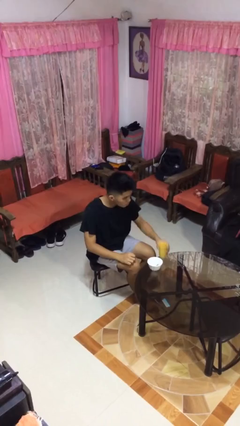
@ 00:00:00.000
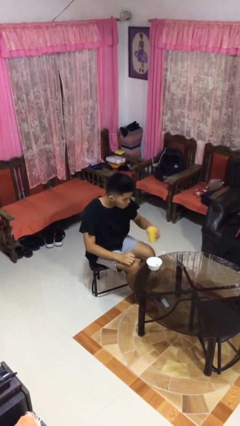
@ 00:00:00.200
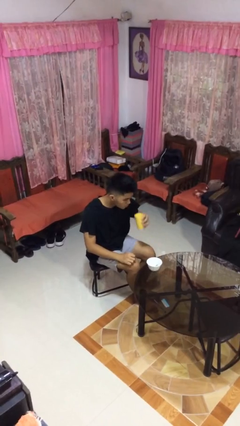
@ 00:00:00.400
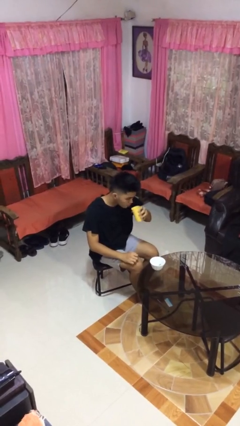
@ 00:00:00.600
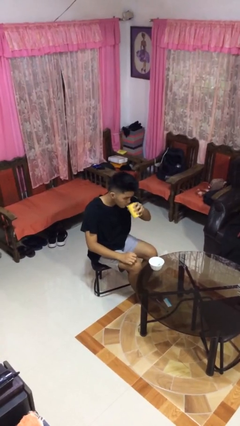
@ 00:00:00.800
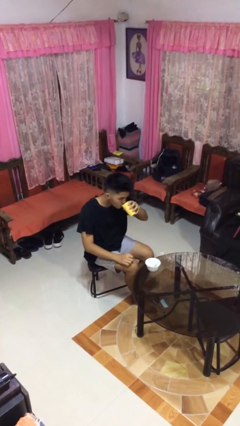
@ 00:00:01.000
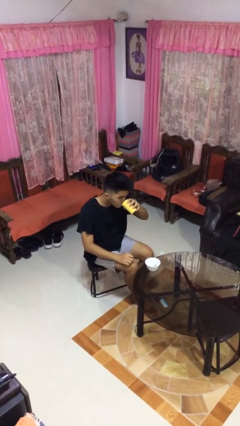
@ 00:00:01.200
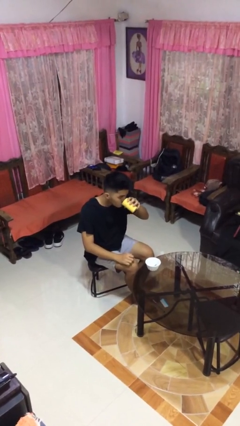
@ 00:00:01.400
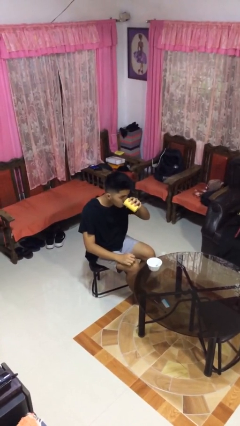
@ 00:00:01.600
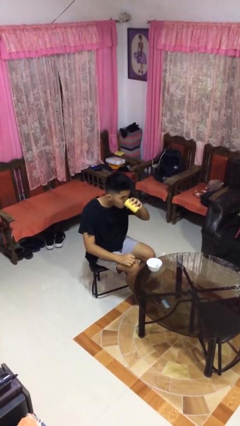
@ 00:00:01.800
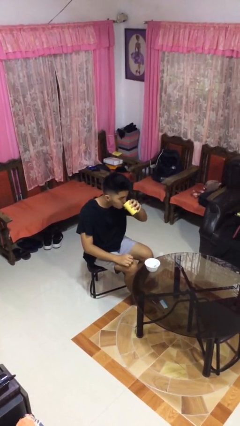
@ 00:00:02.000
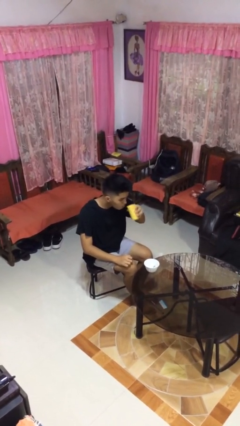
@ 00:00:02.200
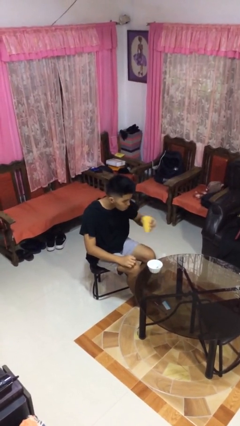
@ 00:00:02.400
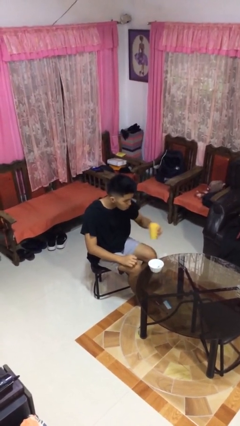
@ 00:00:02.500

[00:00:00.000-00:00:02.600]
person drinks from cup

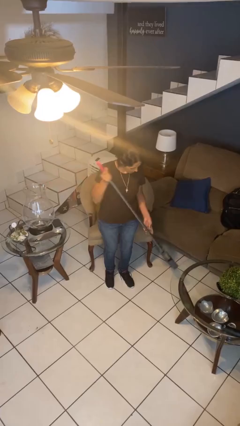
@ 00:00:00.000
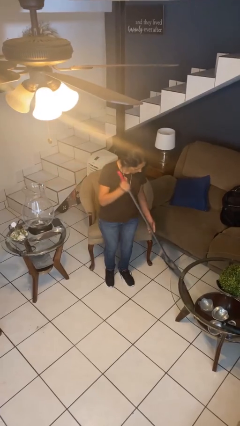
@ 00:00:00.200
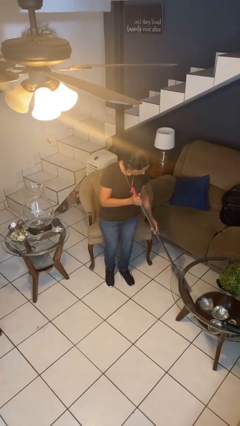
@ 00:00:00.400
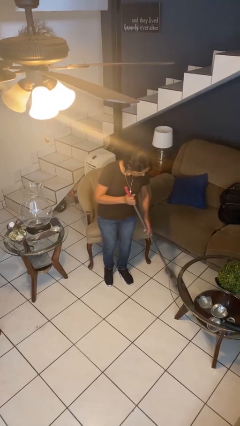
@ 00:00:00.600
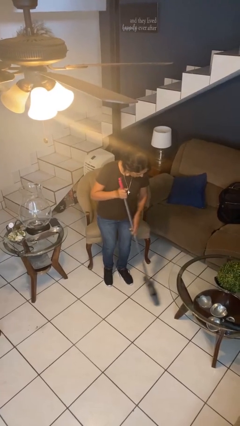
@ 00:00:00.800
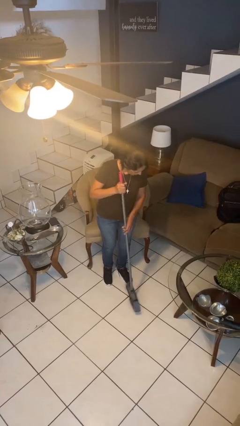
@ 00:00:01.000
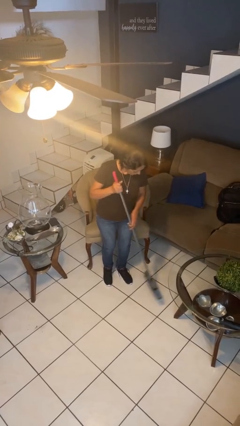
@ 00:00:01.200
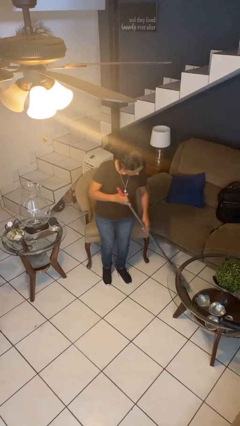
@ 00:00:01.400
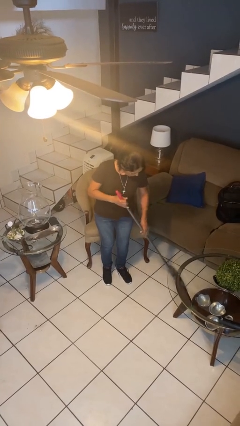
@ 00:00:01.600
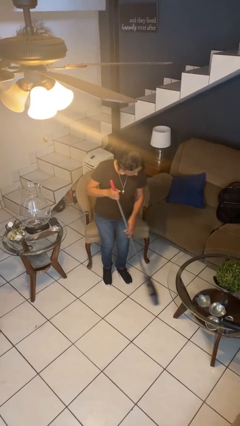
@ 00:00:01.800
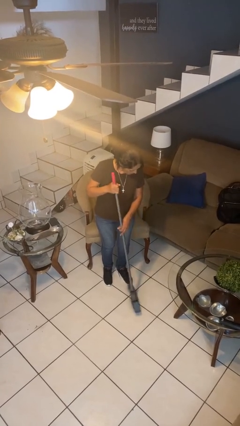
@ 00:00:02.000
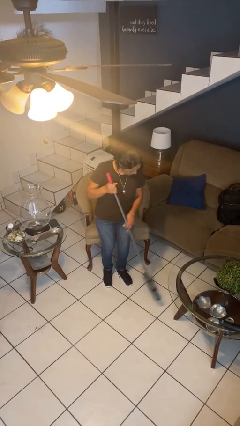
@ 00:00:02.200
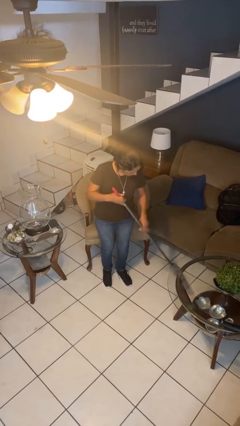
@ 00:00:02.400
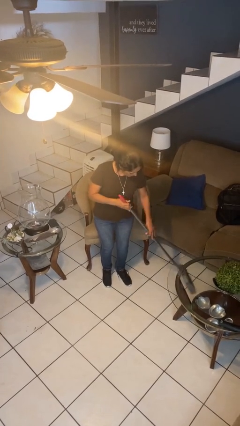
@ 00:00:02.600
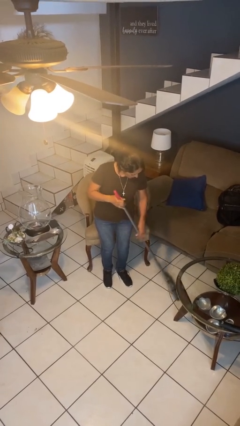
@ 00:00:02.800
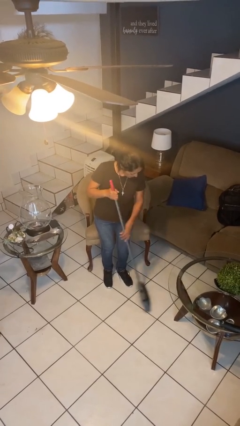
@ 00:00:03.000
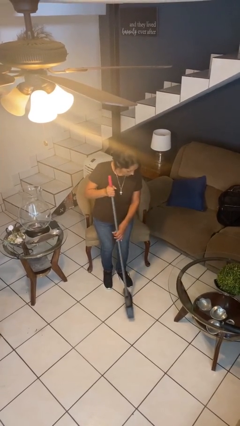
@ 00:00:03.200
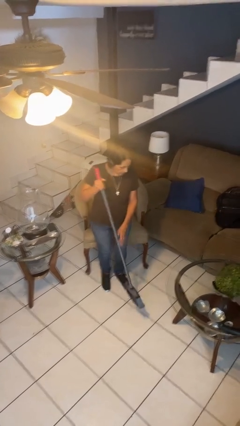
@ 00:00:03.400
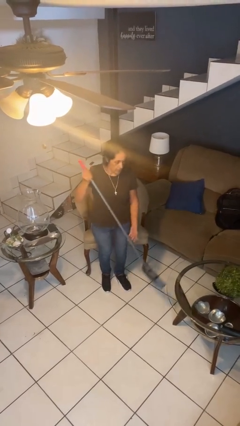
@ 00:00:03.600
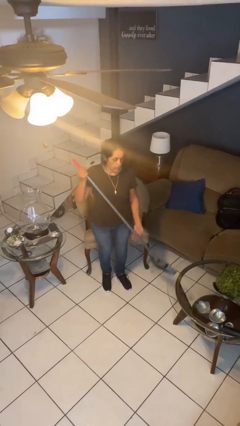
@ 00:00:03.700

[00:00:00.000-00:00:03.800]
person sweeps floor

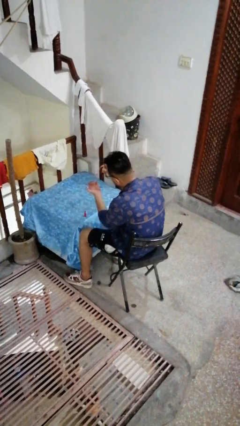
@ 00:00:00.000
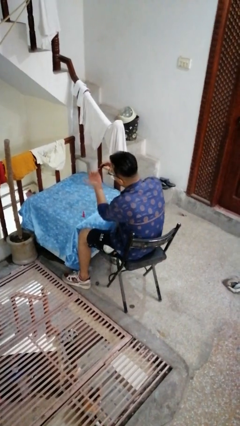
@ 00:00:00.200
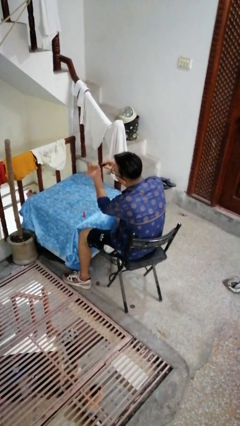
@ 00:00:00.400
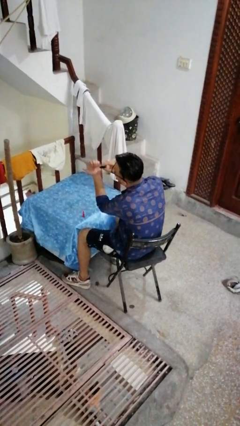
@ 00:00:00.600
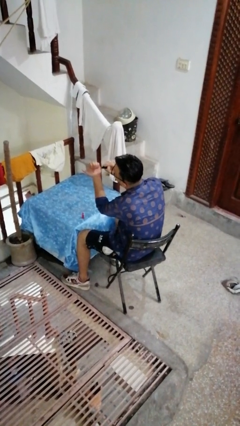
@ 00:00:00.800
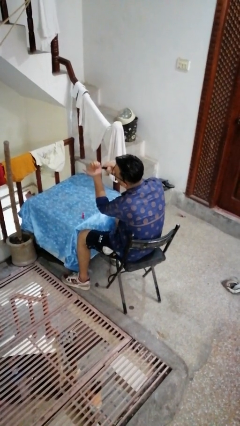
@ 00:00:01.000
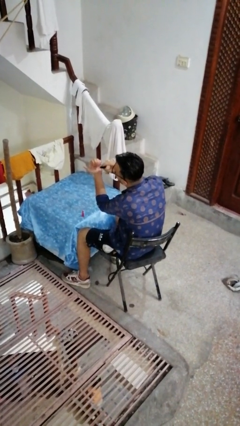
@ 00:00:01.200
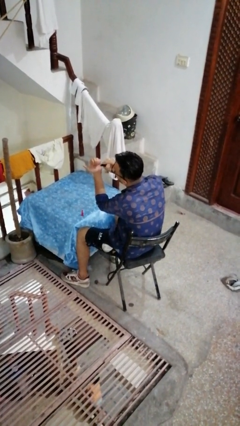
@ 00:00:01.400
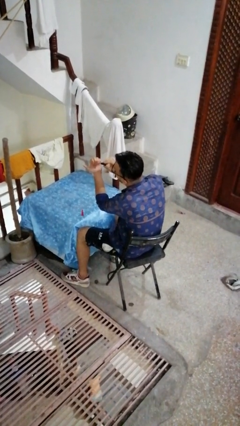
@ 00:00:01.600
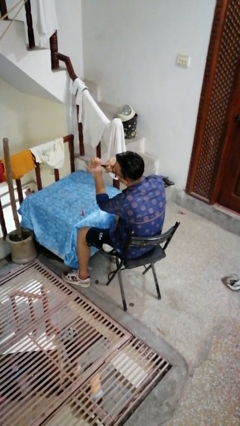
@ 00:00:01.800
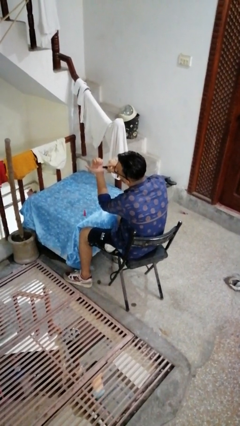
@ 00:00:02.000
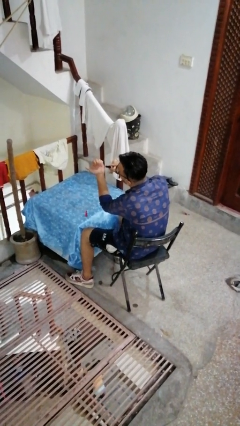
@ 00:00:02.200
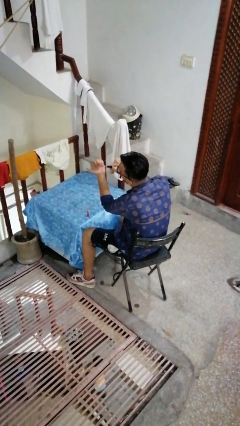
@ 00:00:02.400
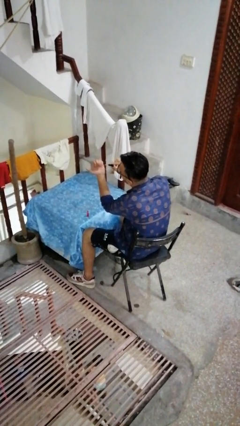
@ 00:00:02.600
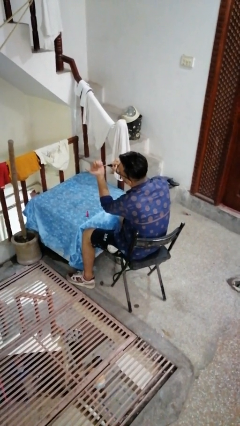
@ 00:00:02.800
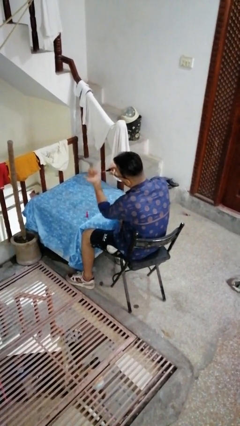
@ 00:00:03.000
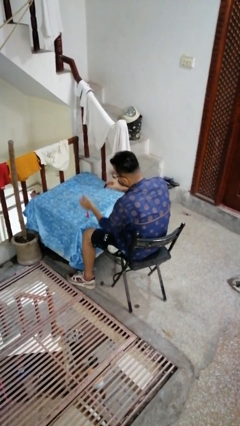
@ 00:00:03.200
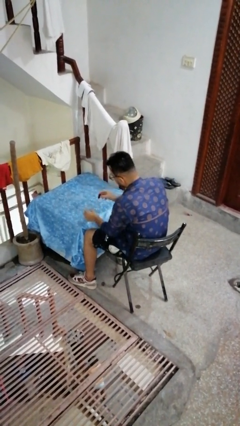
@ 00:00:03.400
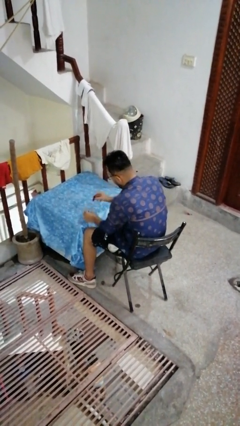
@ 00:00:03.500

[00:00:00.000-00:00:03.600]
person paints fingernails

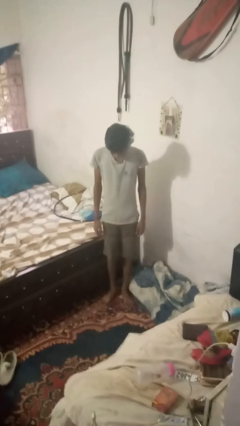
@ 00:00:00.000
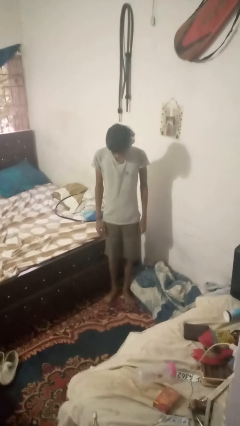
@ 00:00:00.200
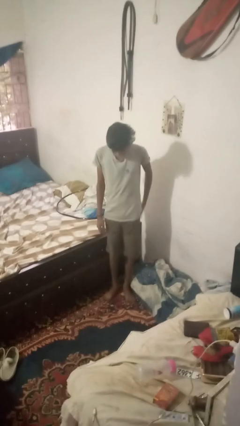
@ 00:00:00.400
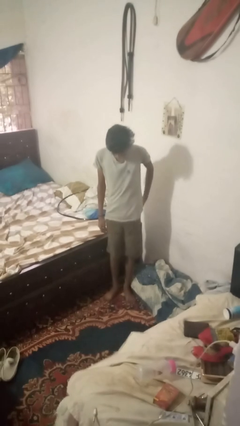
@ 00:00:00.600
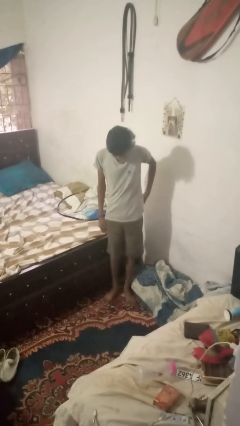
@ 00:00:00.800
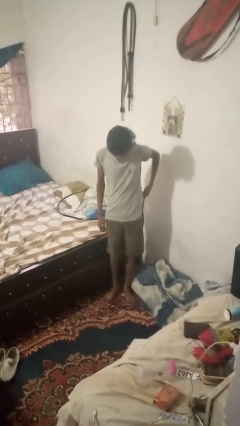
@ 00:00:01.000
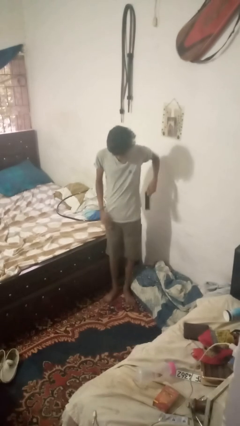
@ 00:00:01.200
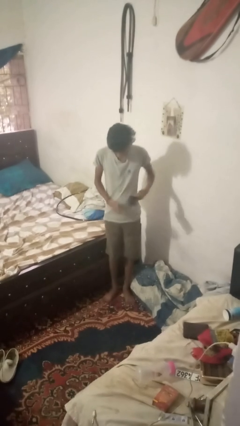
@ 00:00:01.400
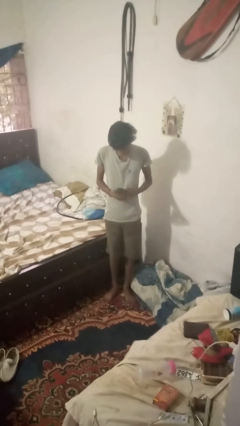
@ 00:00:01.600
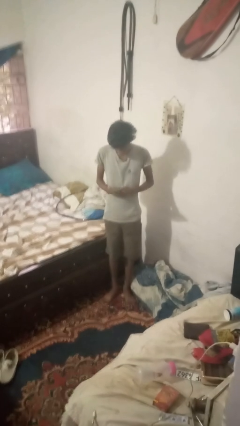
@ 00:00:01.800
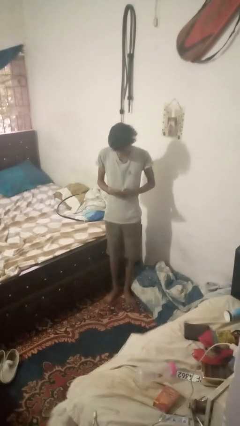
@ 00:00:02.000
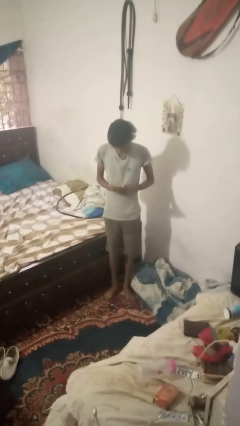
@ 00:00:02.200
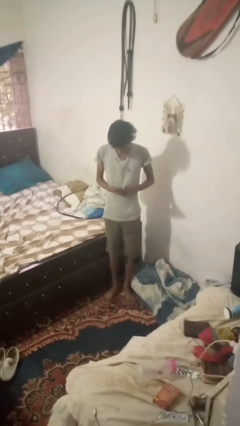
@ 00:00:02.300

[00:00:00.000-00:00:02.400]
person takes phone from pocket

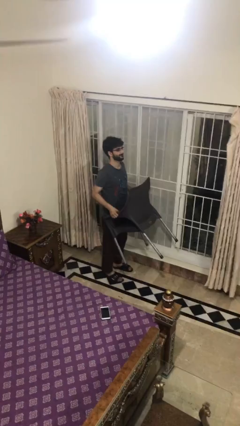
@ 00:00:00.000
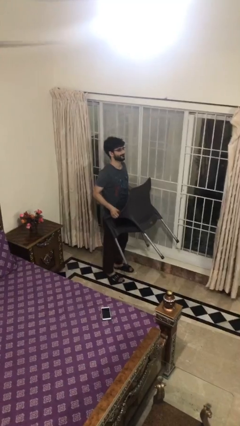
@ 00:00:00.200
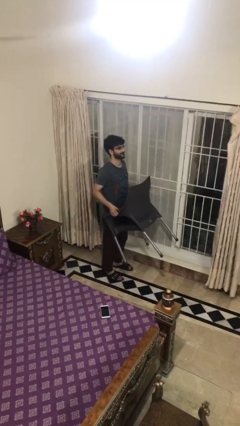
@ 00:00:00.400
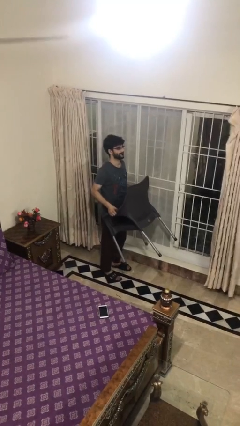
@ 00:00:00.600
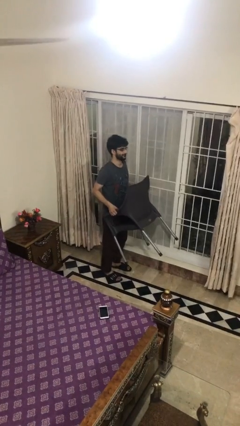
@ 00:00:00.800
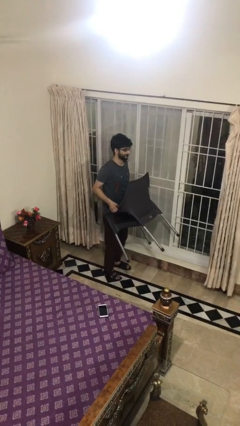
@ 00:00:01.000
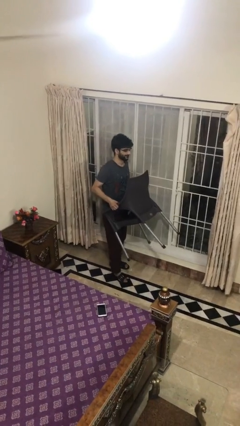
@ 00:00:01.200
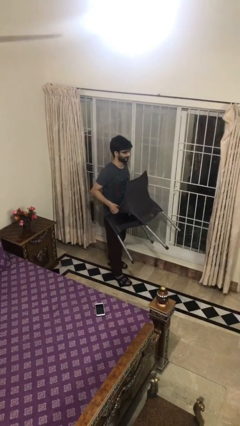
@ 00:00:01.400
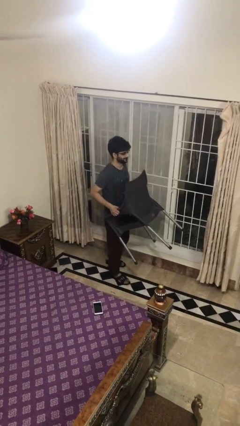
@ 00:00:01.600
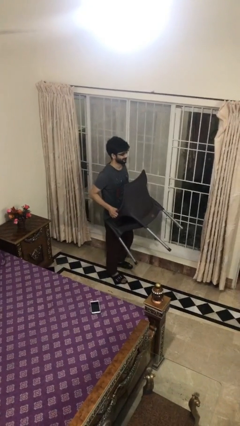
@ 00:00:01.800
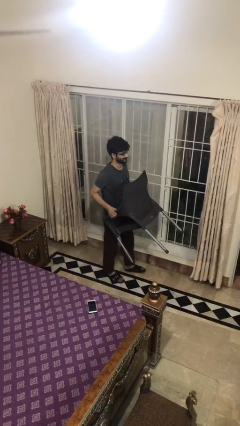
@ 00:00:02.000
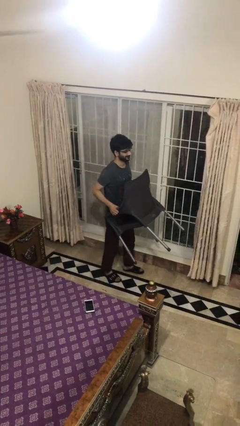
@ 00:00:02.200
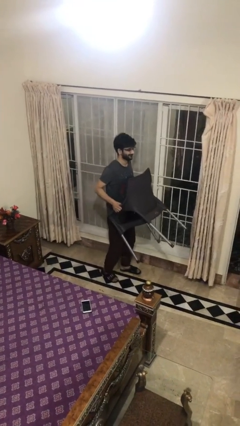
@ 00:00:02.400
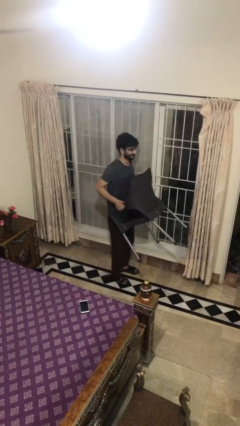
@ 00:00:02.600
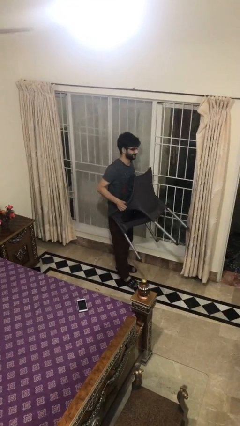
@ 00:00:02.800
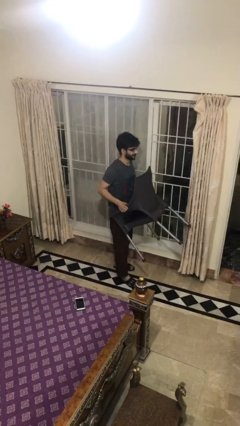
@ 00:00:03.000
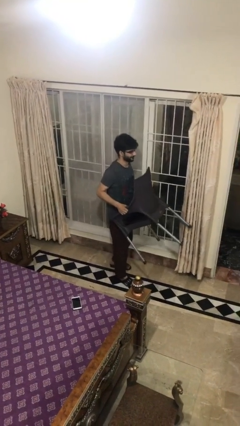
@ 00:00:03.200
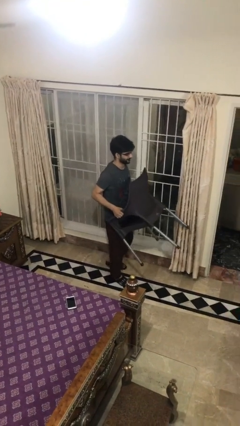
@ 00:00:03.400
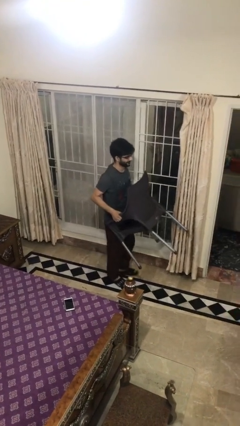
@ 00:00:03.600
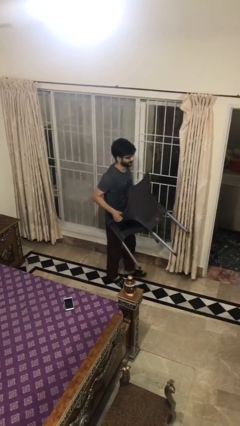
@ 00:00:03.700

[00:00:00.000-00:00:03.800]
person carries heavy object

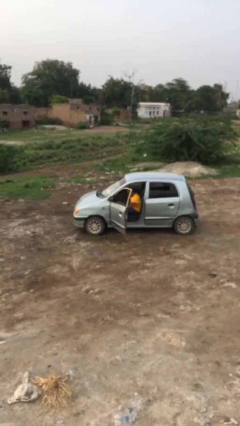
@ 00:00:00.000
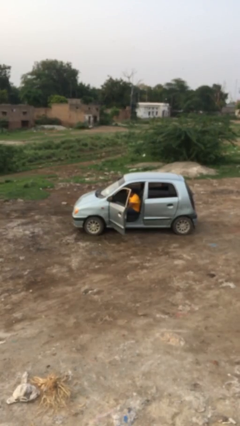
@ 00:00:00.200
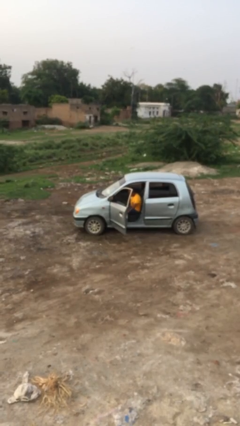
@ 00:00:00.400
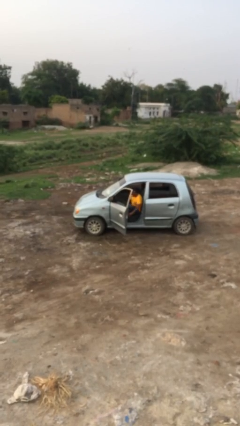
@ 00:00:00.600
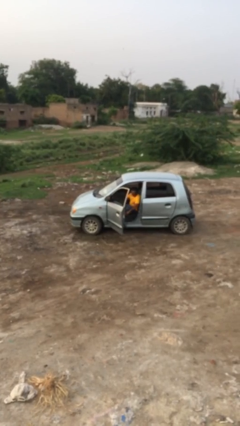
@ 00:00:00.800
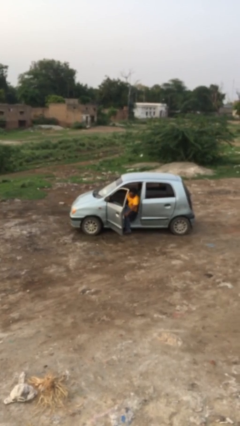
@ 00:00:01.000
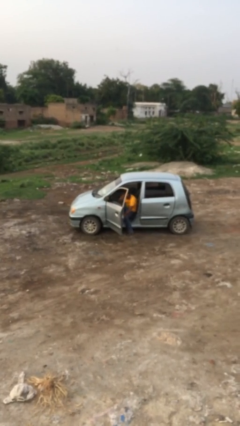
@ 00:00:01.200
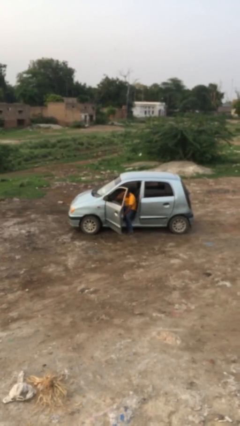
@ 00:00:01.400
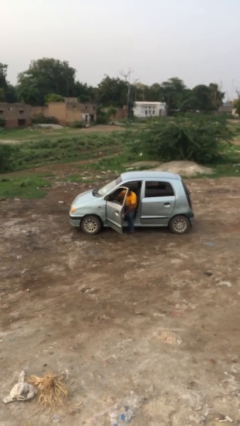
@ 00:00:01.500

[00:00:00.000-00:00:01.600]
person exits car
